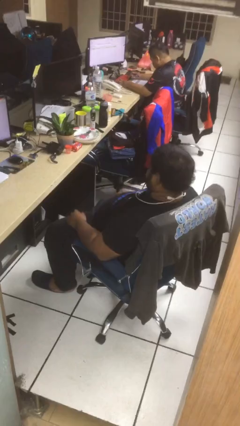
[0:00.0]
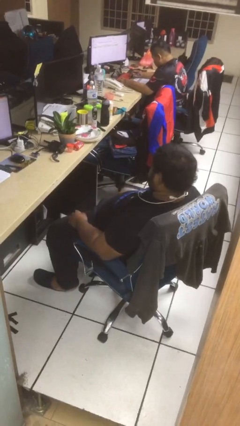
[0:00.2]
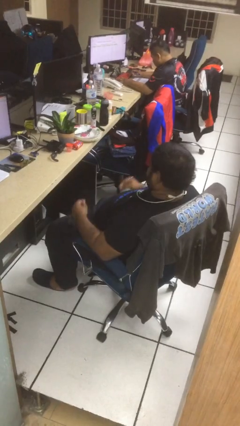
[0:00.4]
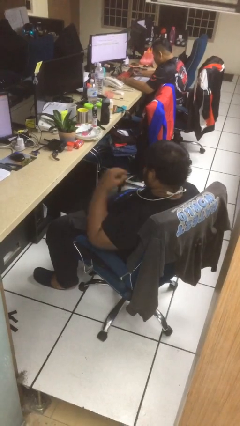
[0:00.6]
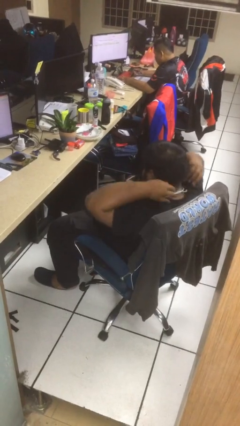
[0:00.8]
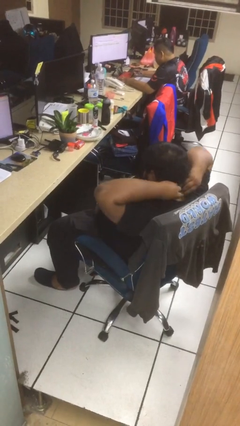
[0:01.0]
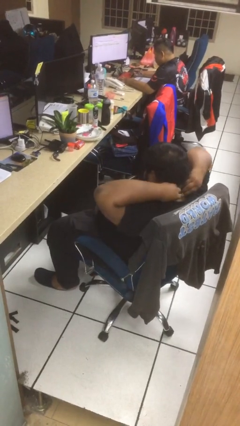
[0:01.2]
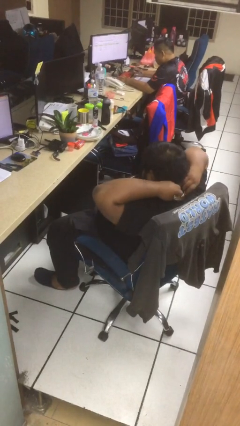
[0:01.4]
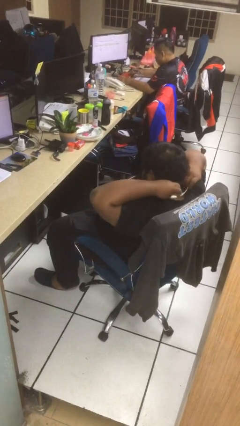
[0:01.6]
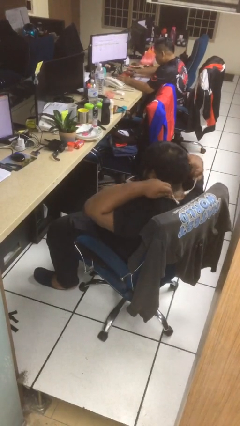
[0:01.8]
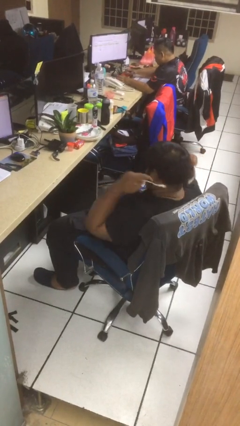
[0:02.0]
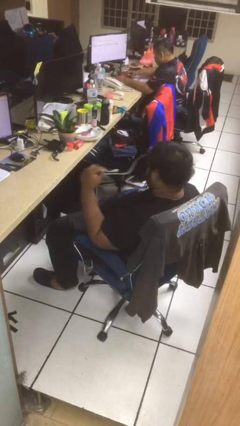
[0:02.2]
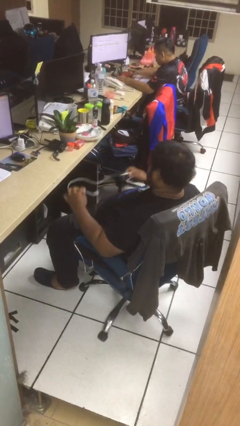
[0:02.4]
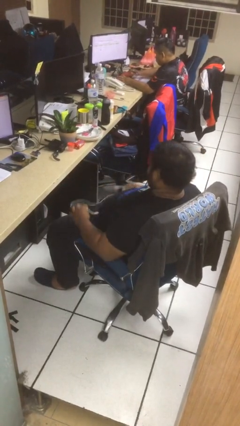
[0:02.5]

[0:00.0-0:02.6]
person takes off necklace

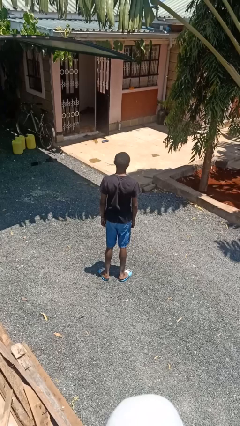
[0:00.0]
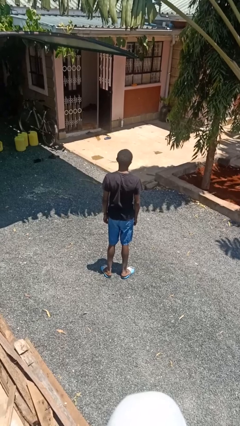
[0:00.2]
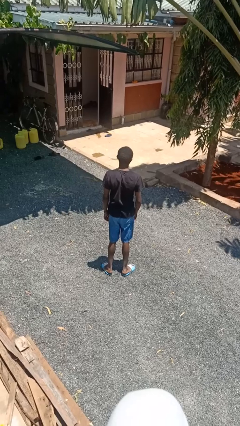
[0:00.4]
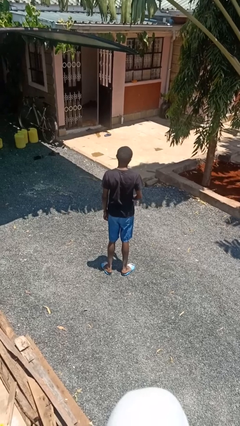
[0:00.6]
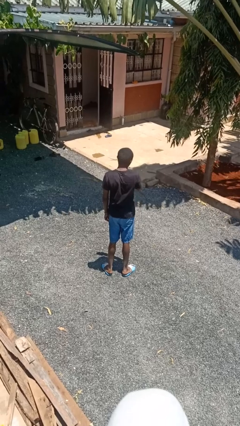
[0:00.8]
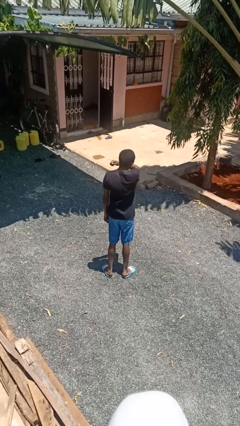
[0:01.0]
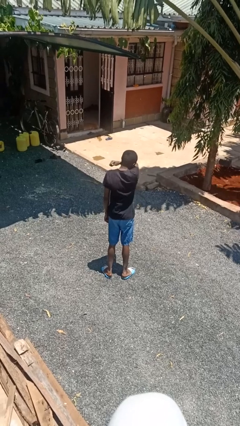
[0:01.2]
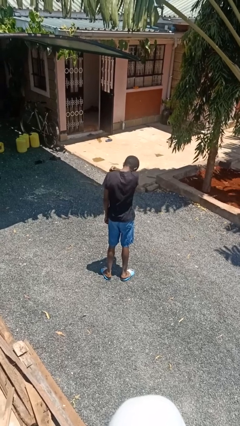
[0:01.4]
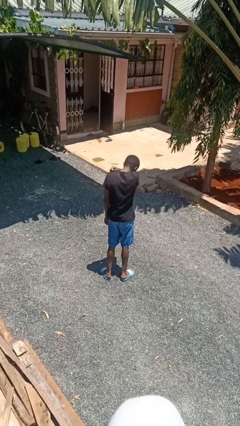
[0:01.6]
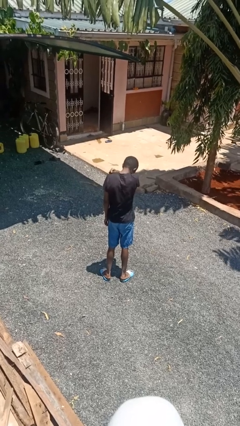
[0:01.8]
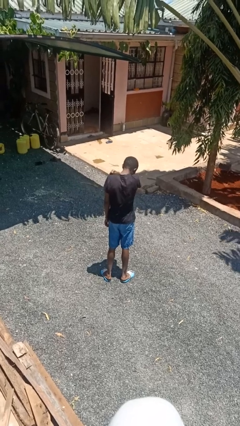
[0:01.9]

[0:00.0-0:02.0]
person sneezes into arm

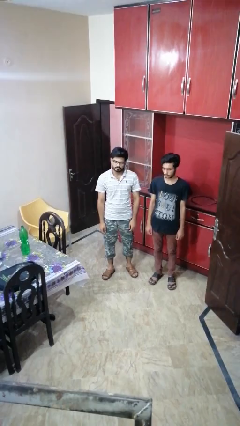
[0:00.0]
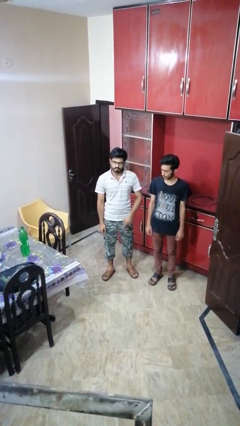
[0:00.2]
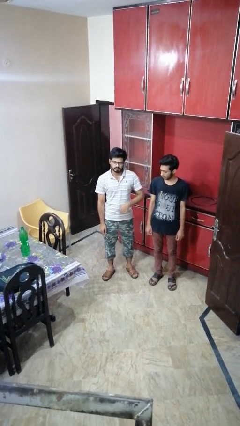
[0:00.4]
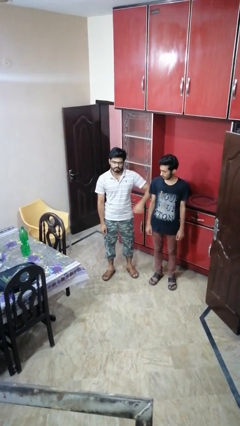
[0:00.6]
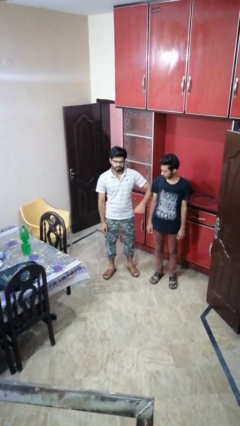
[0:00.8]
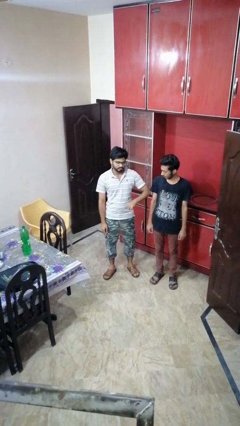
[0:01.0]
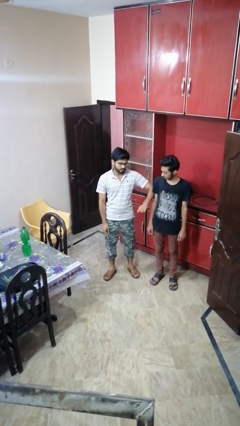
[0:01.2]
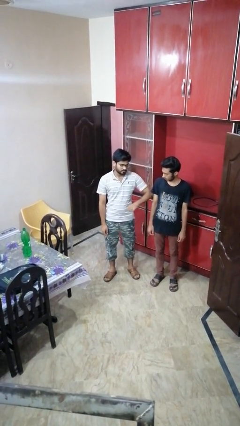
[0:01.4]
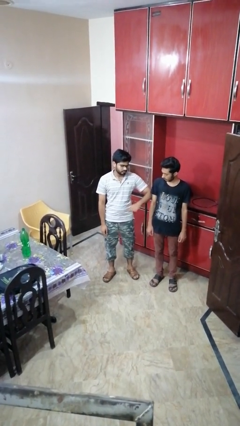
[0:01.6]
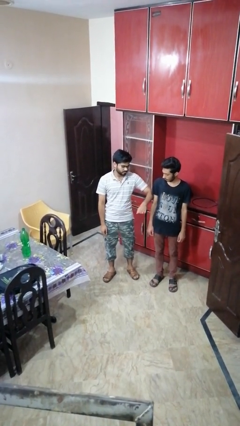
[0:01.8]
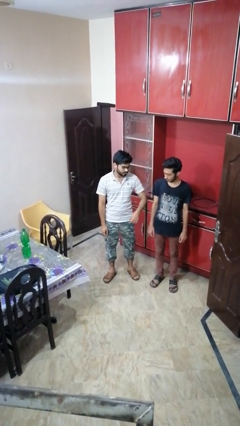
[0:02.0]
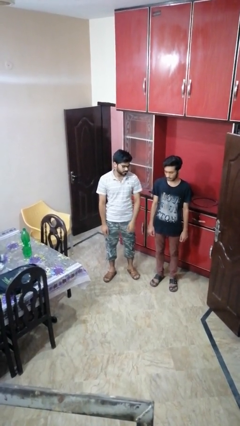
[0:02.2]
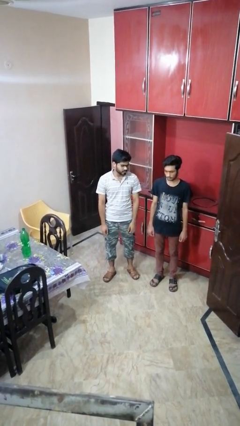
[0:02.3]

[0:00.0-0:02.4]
person nudges person with elbow

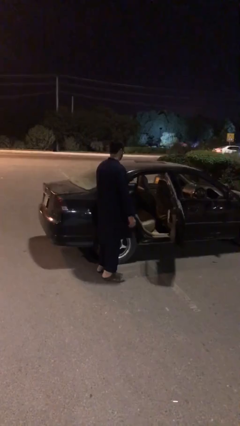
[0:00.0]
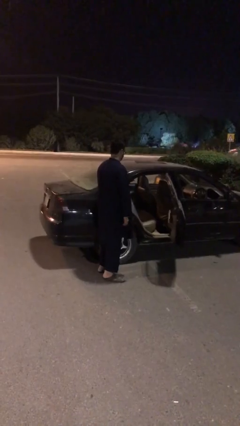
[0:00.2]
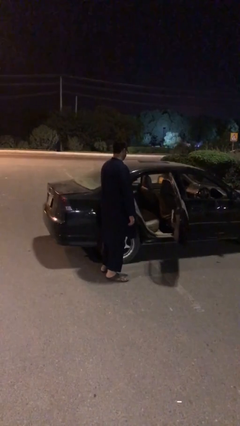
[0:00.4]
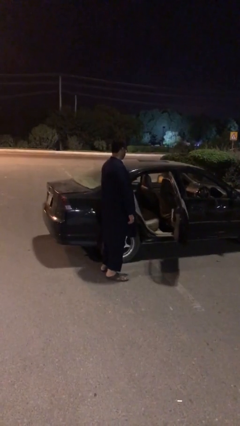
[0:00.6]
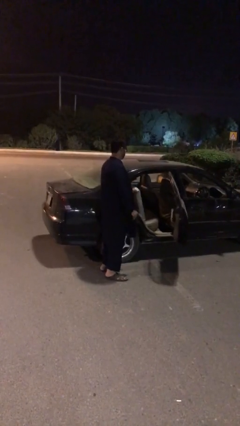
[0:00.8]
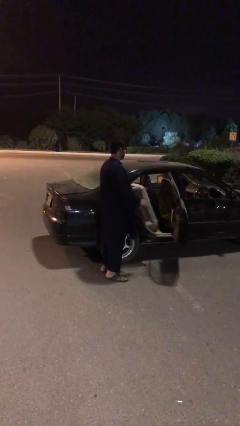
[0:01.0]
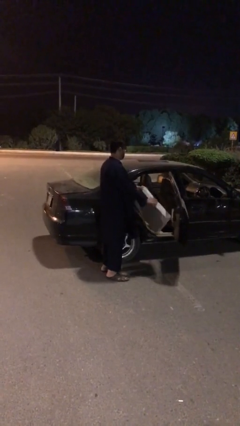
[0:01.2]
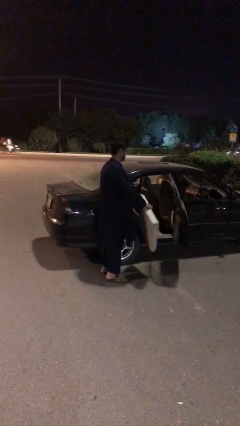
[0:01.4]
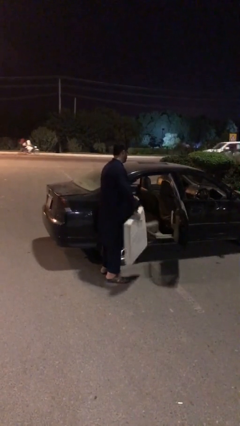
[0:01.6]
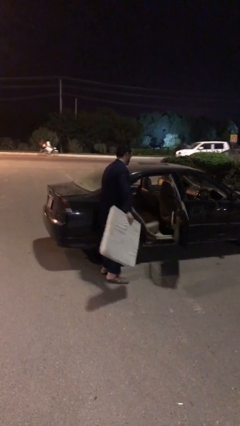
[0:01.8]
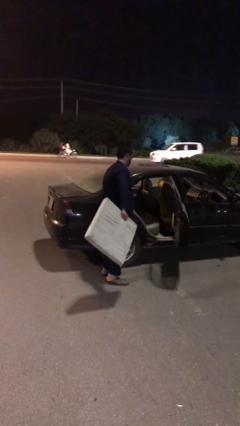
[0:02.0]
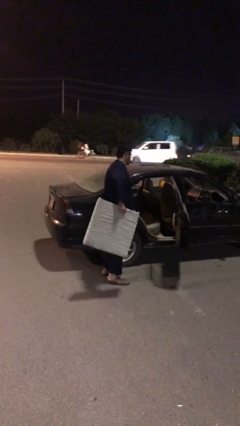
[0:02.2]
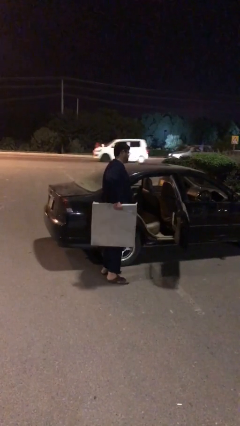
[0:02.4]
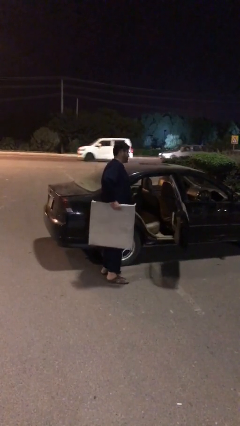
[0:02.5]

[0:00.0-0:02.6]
person unloads car

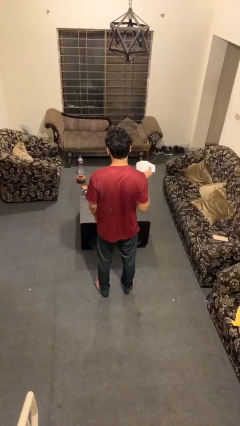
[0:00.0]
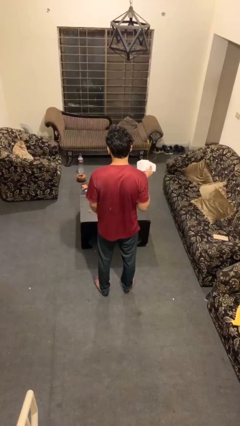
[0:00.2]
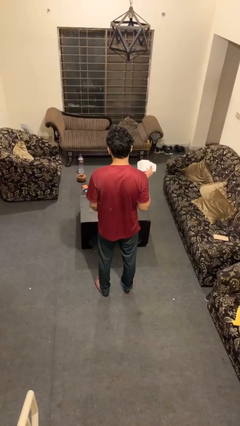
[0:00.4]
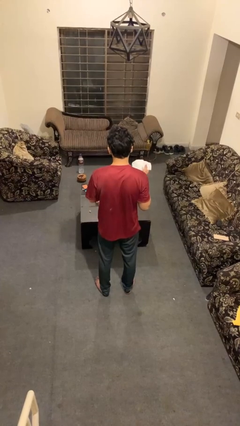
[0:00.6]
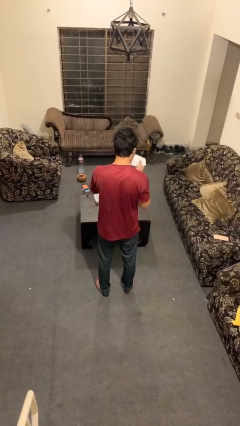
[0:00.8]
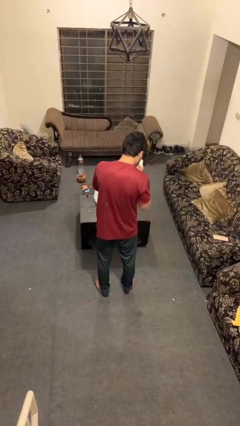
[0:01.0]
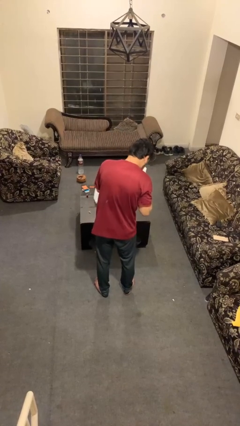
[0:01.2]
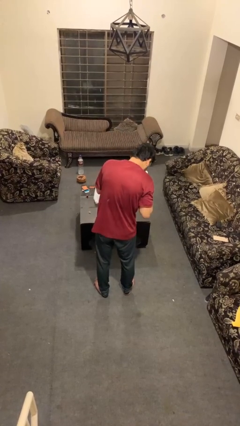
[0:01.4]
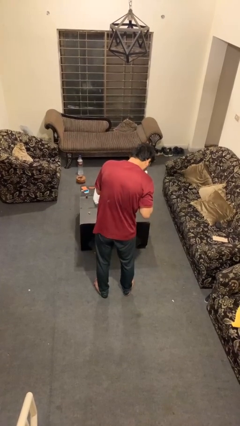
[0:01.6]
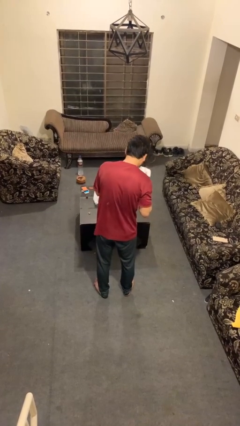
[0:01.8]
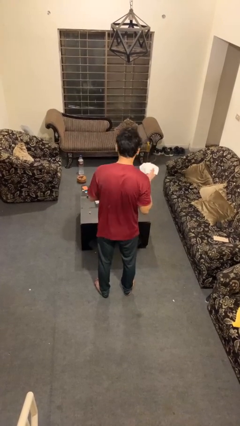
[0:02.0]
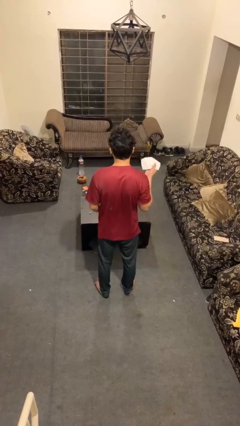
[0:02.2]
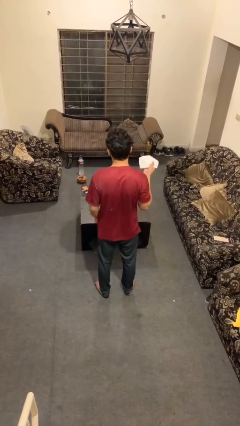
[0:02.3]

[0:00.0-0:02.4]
person blows nose

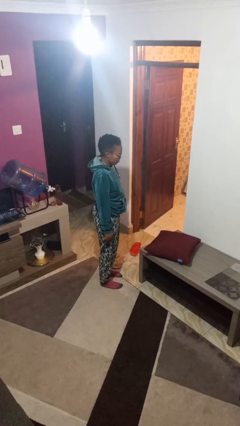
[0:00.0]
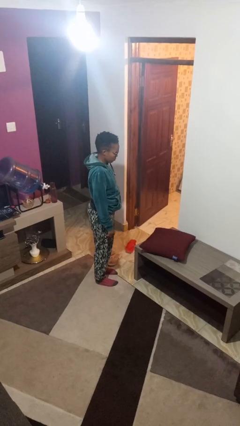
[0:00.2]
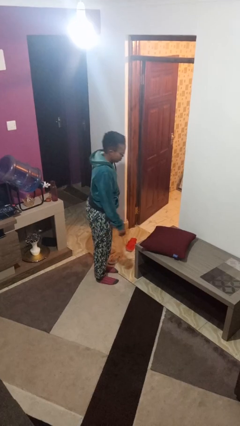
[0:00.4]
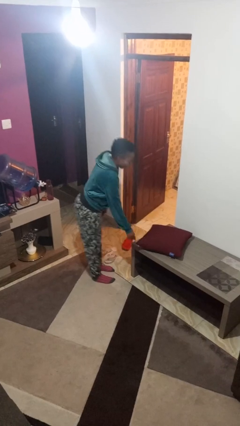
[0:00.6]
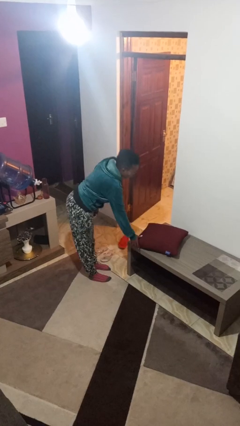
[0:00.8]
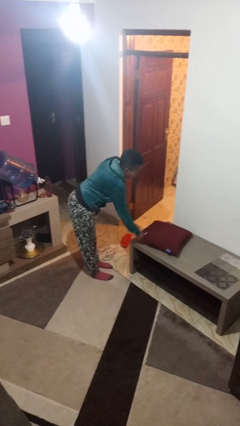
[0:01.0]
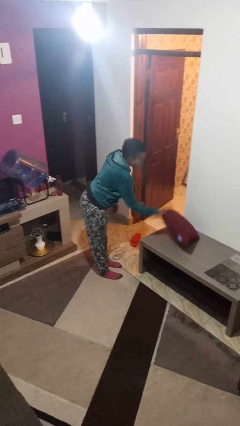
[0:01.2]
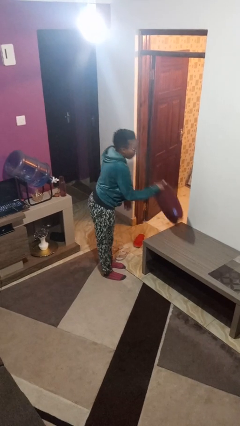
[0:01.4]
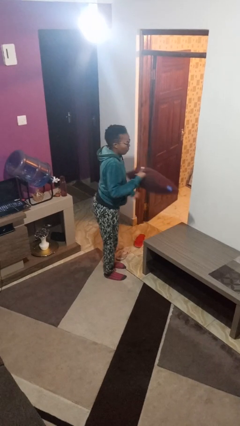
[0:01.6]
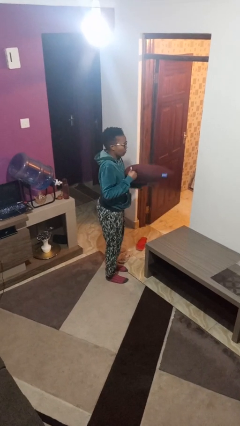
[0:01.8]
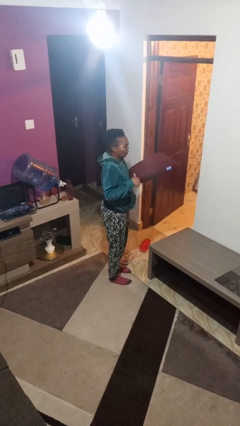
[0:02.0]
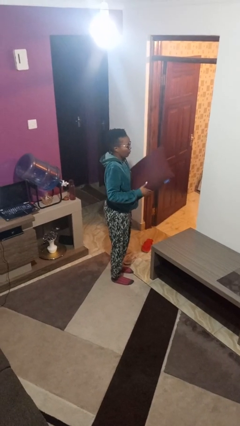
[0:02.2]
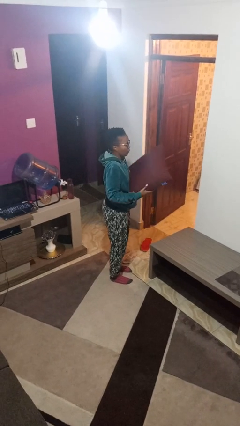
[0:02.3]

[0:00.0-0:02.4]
person picks up object from table

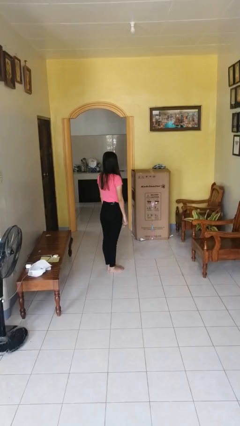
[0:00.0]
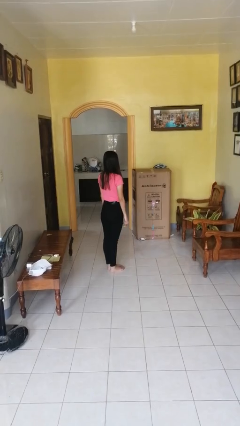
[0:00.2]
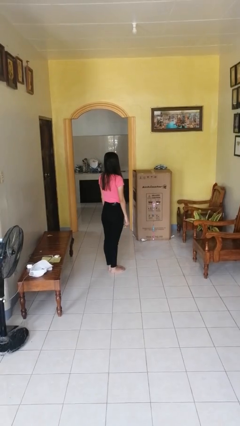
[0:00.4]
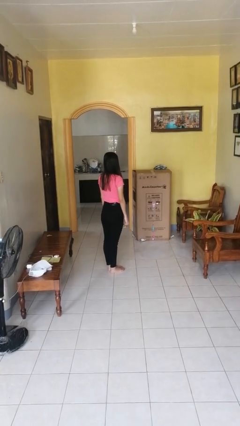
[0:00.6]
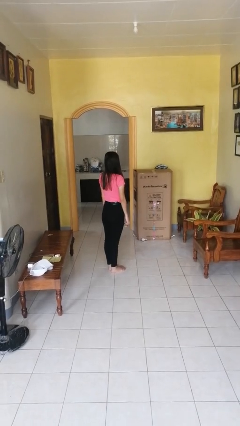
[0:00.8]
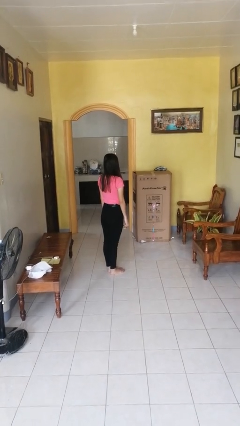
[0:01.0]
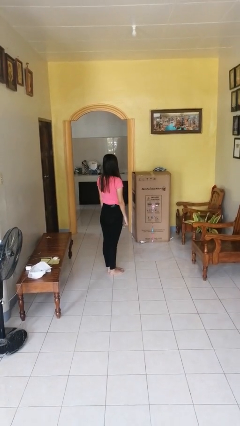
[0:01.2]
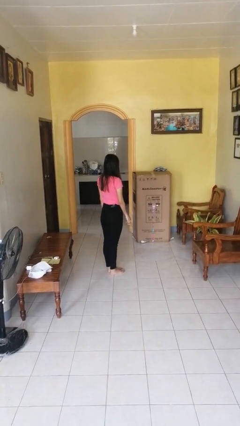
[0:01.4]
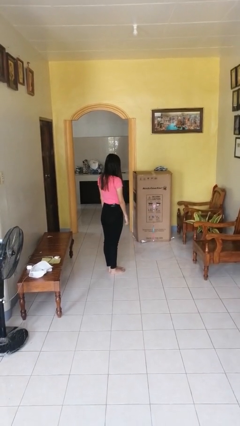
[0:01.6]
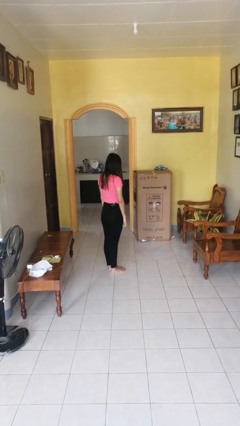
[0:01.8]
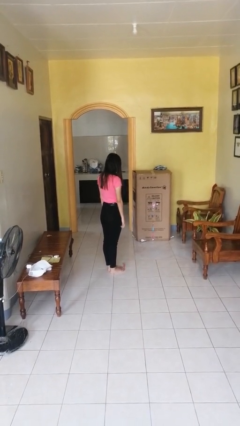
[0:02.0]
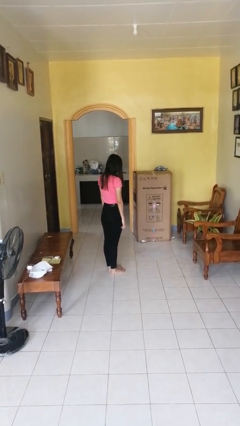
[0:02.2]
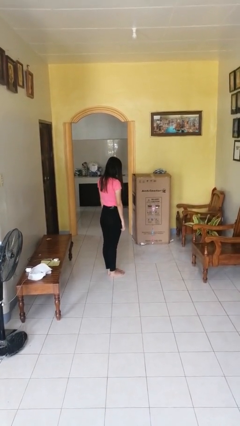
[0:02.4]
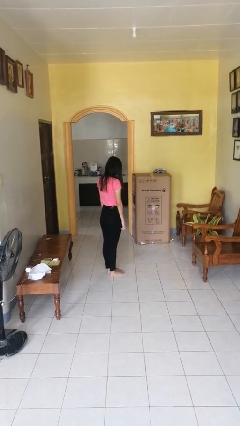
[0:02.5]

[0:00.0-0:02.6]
person throws object to ground
